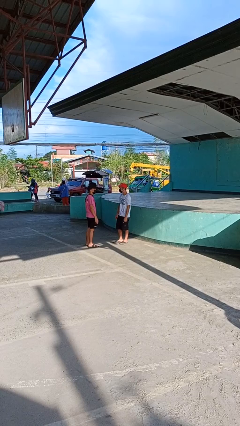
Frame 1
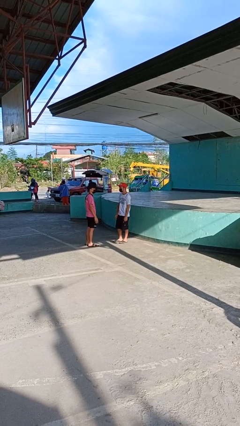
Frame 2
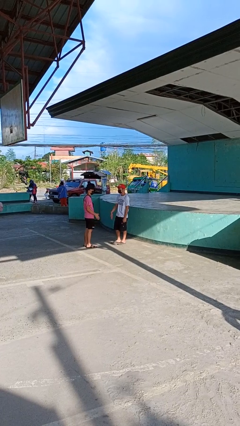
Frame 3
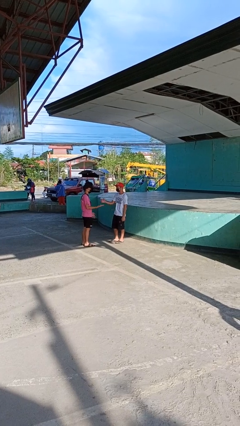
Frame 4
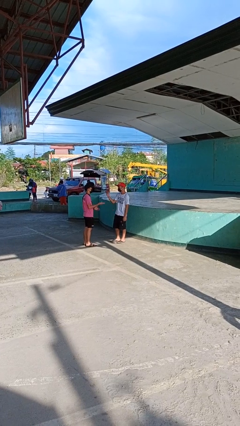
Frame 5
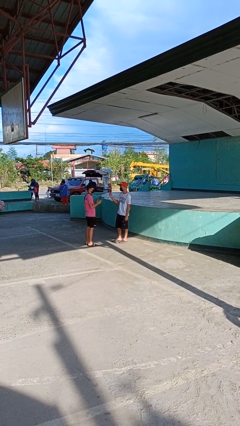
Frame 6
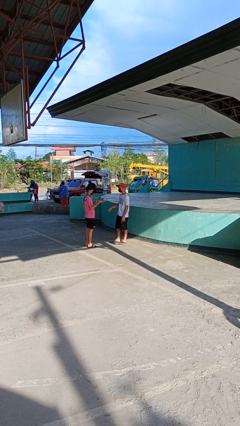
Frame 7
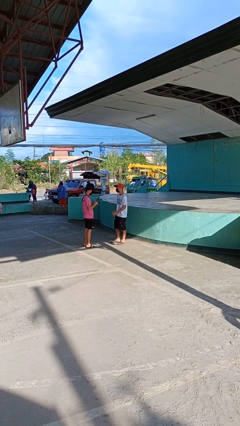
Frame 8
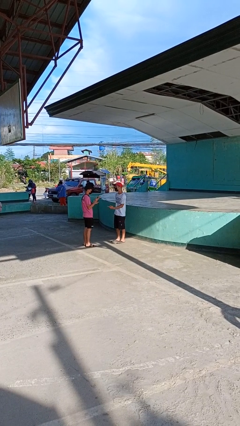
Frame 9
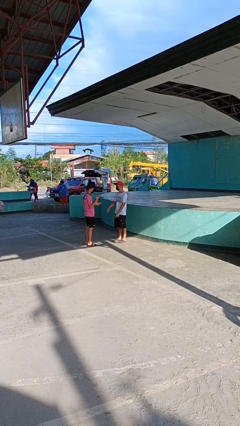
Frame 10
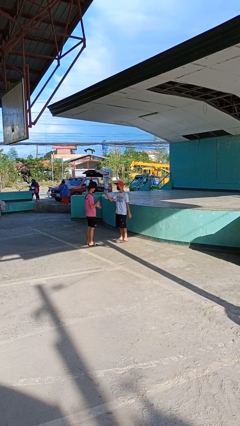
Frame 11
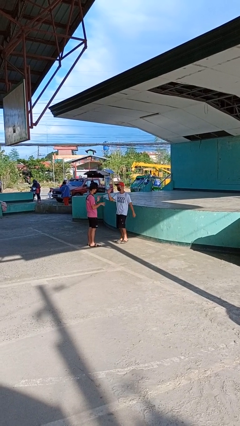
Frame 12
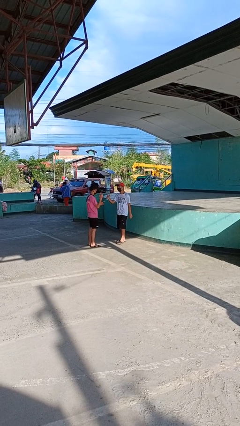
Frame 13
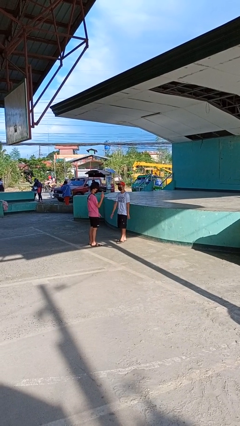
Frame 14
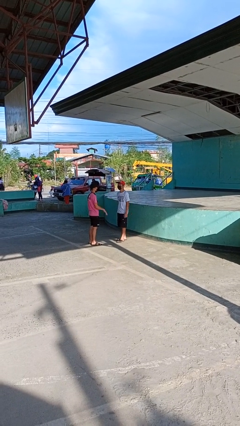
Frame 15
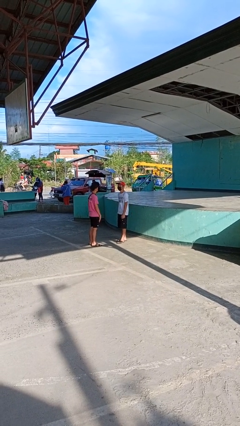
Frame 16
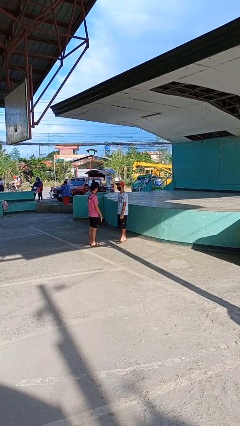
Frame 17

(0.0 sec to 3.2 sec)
person talks to person

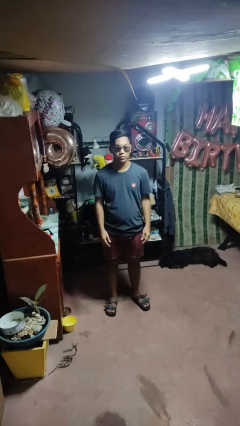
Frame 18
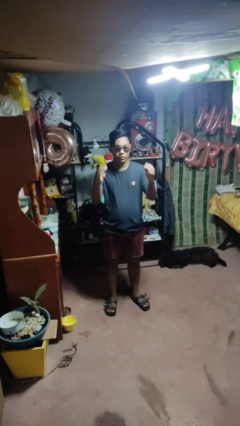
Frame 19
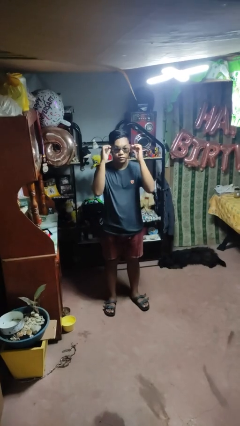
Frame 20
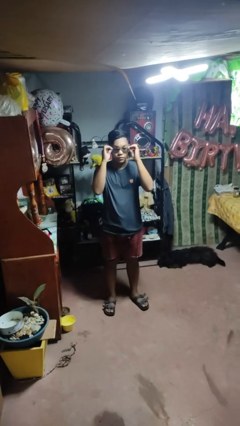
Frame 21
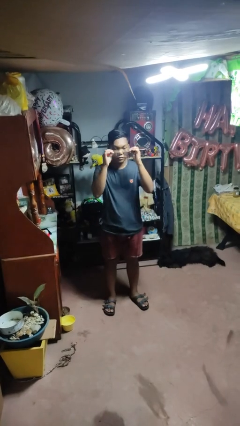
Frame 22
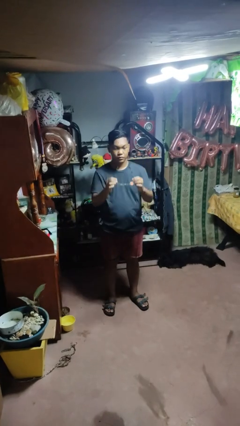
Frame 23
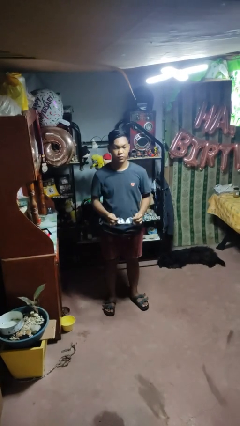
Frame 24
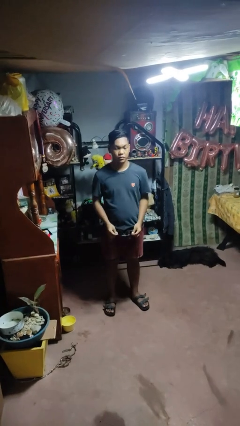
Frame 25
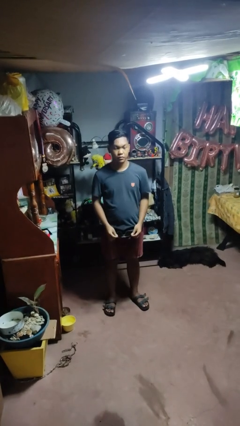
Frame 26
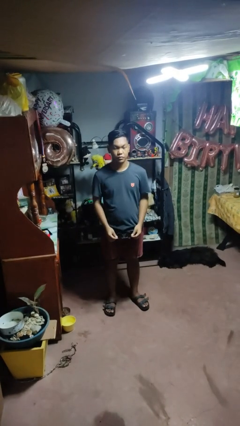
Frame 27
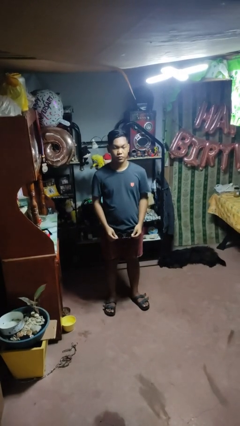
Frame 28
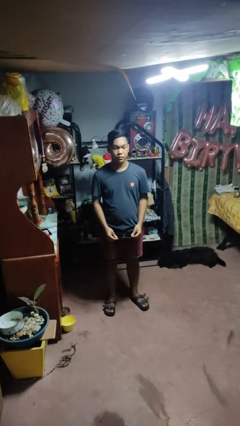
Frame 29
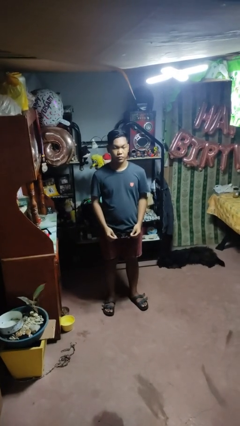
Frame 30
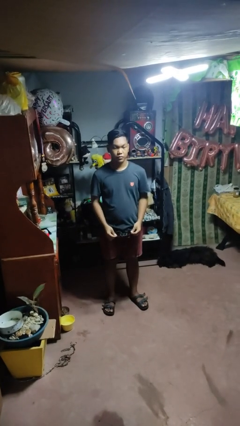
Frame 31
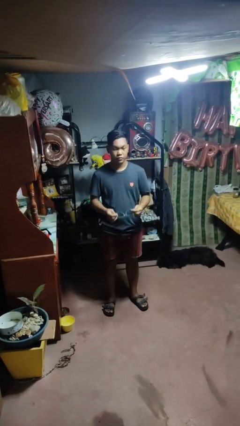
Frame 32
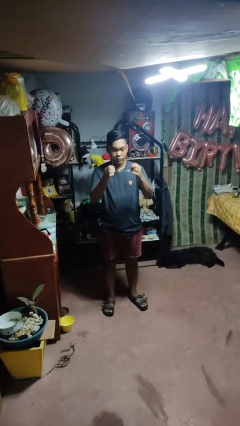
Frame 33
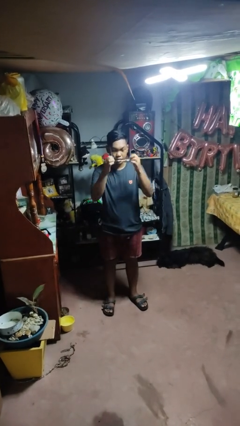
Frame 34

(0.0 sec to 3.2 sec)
person takes off sunglasses

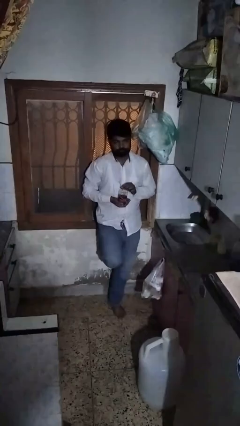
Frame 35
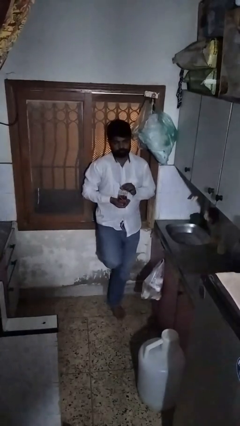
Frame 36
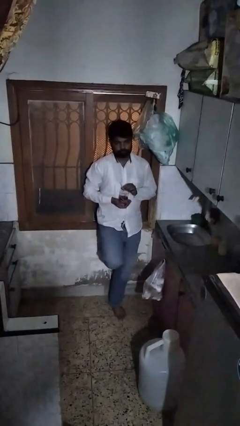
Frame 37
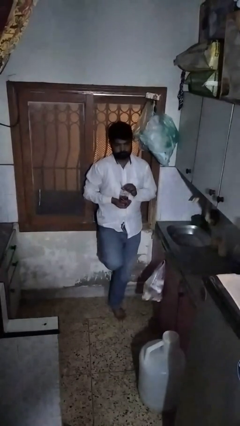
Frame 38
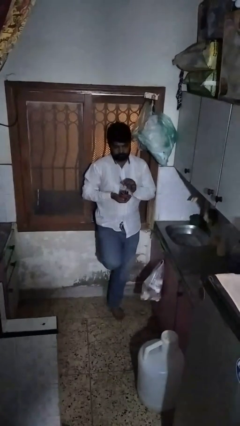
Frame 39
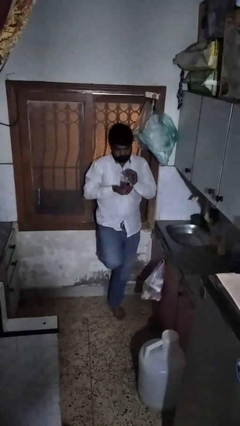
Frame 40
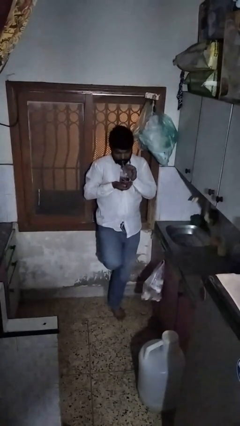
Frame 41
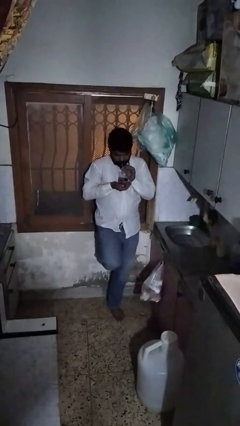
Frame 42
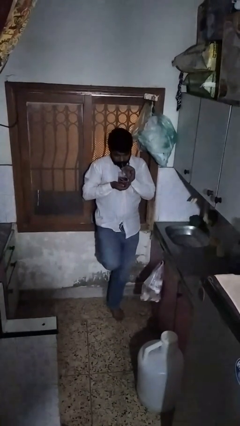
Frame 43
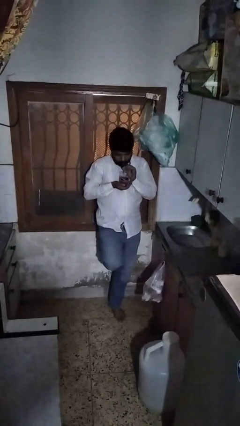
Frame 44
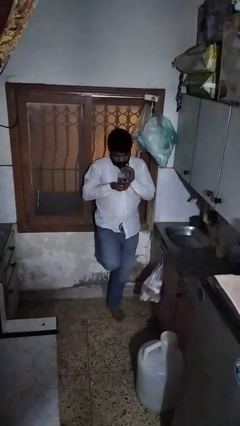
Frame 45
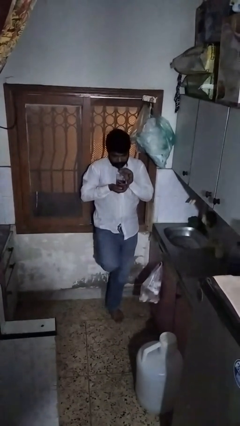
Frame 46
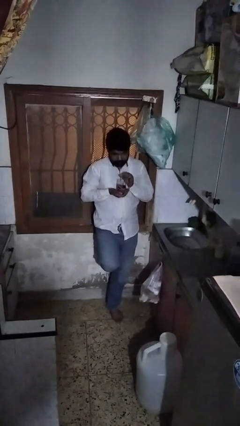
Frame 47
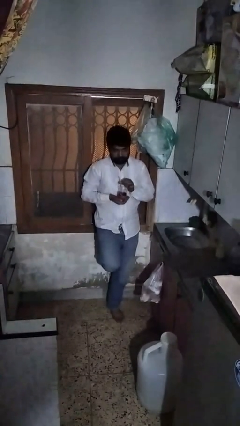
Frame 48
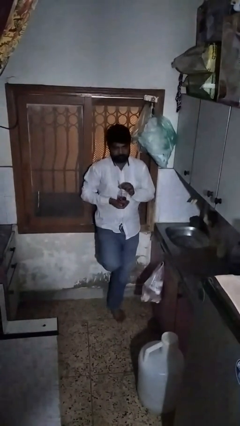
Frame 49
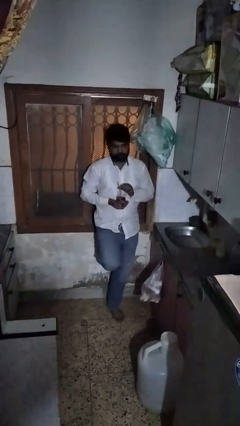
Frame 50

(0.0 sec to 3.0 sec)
person drinks from straw

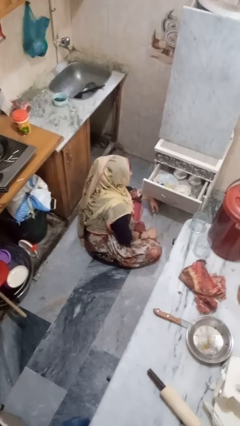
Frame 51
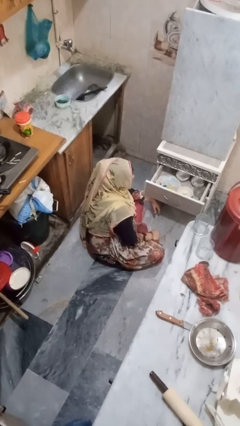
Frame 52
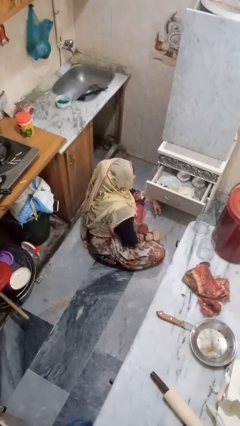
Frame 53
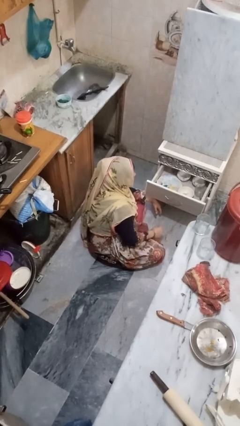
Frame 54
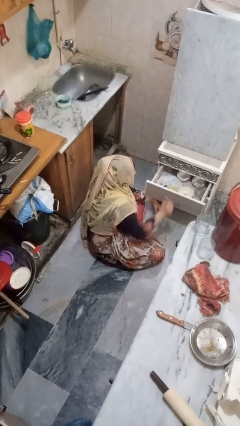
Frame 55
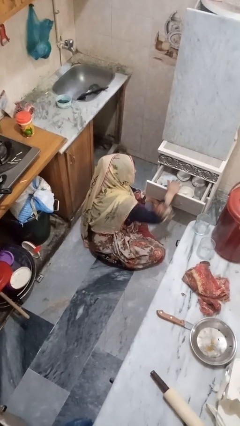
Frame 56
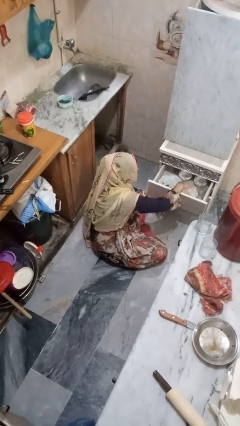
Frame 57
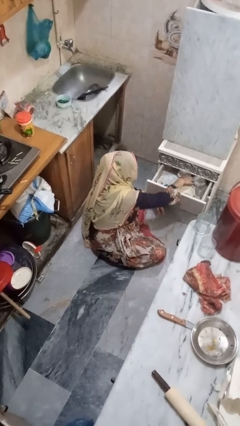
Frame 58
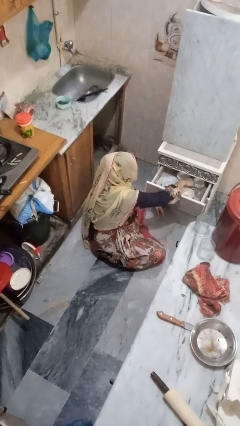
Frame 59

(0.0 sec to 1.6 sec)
person searches in kitchen drawer

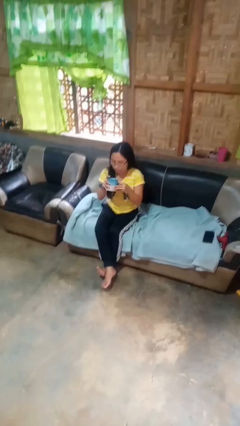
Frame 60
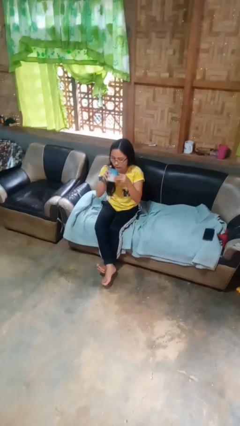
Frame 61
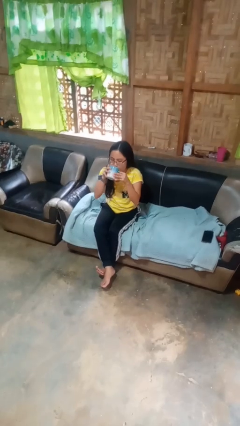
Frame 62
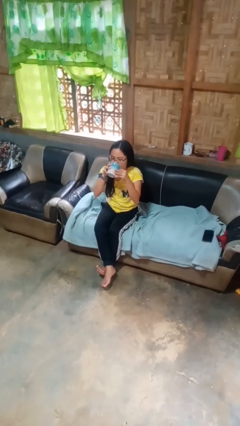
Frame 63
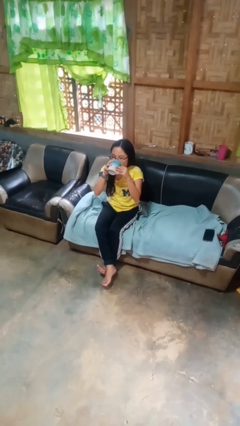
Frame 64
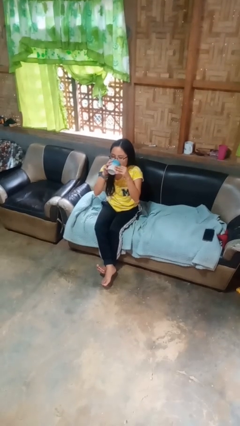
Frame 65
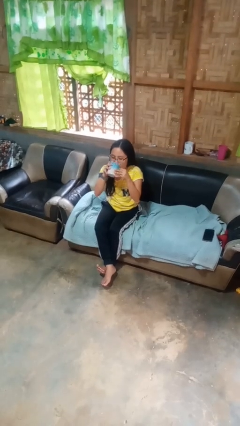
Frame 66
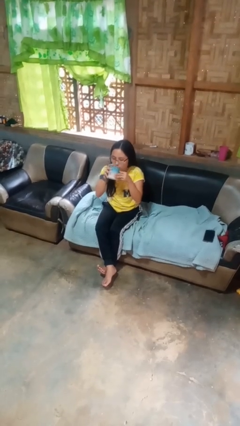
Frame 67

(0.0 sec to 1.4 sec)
person drinks from mug

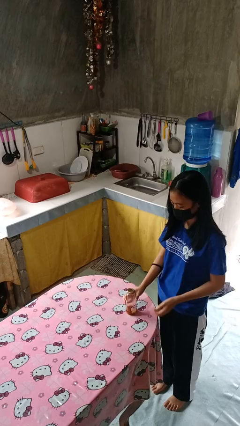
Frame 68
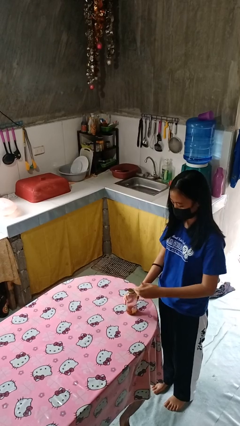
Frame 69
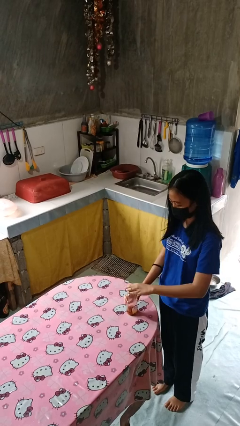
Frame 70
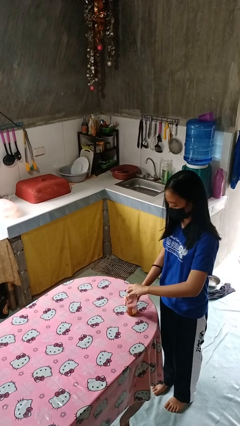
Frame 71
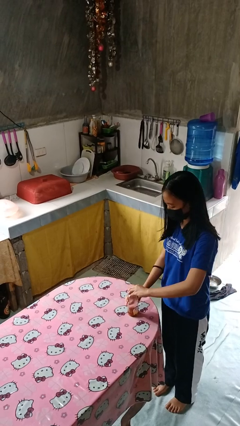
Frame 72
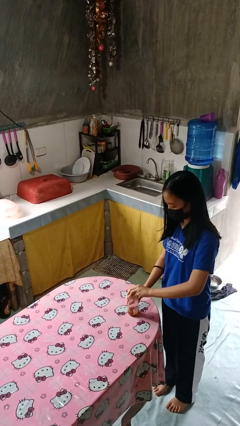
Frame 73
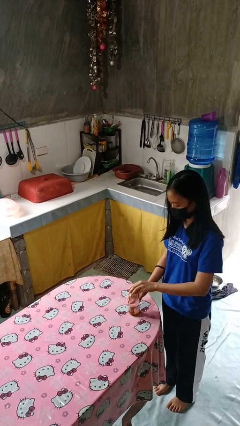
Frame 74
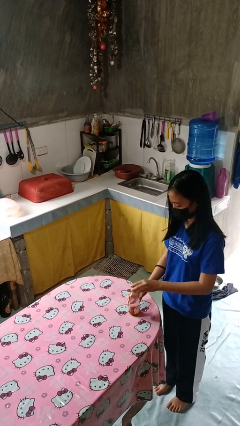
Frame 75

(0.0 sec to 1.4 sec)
person opens jar

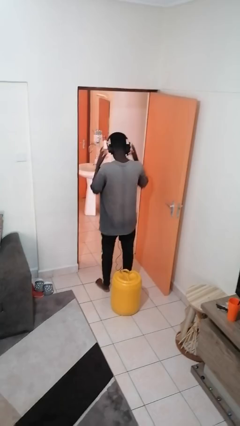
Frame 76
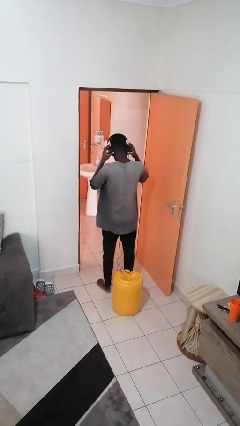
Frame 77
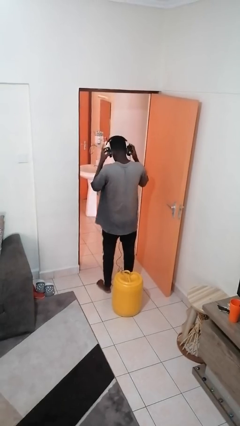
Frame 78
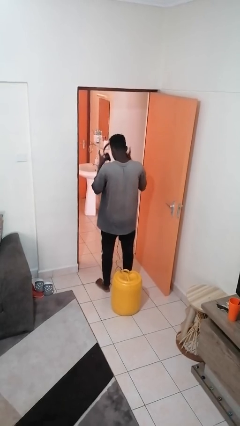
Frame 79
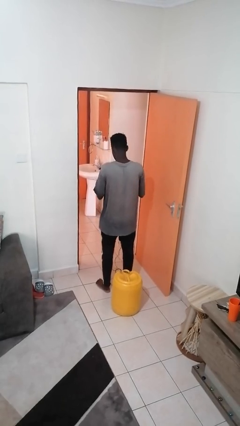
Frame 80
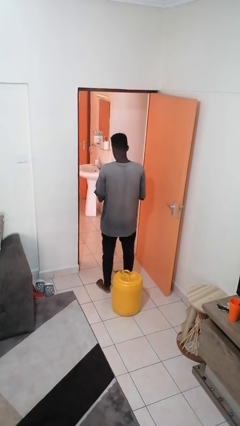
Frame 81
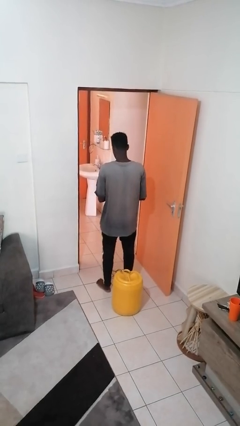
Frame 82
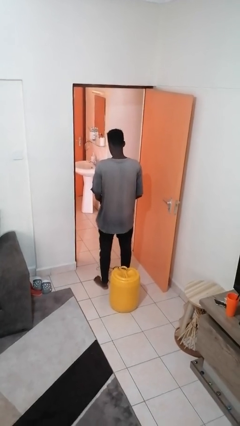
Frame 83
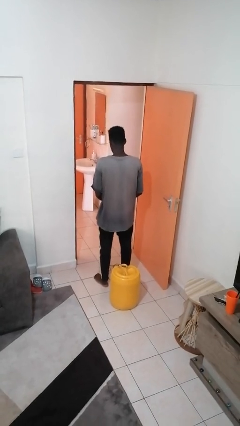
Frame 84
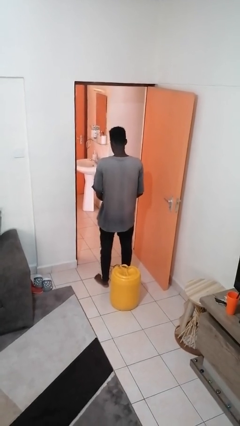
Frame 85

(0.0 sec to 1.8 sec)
person takes off headphones

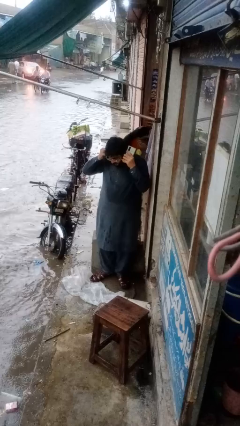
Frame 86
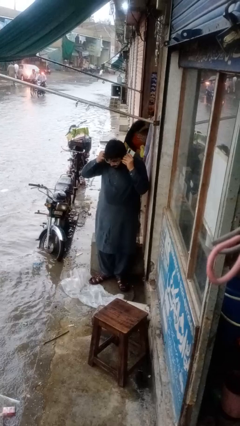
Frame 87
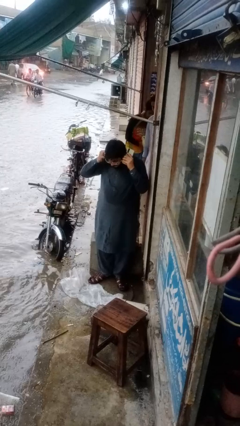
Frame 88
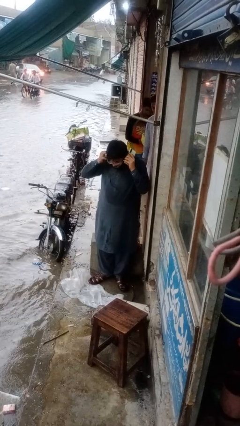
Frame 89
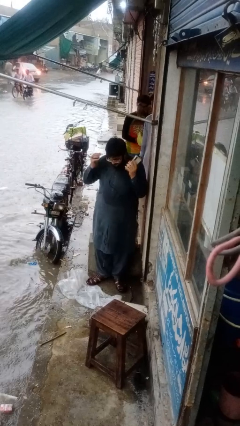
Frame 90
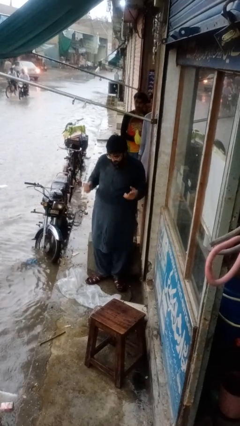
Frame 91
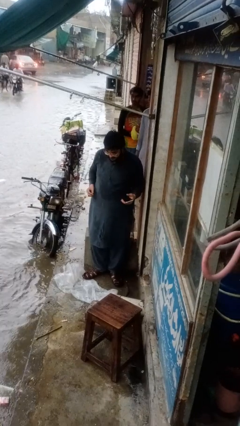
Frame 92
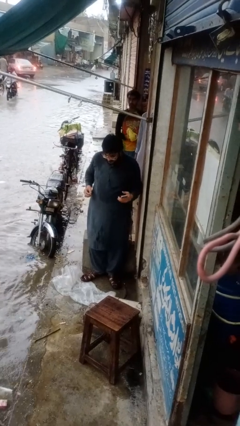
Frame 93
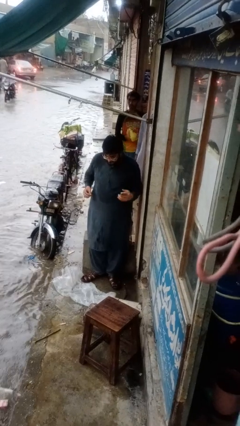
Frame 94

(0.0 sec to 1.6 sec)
person puts on headphones
